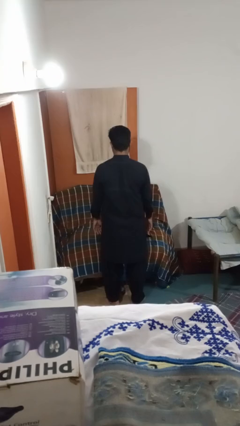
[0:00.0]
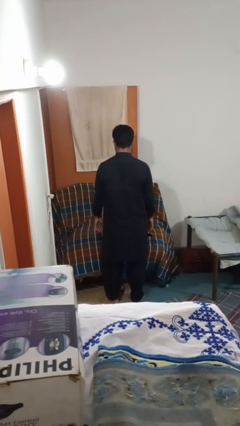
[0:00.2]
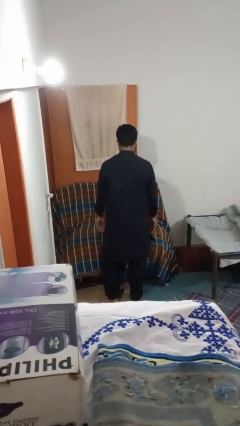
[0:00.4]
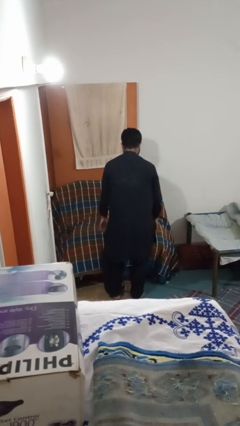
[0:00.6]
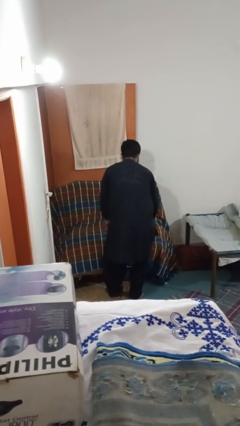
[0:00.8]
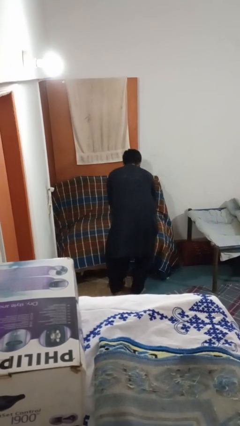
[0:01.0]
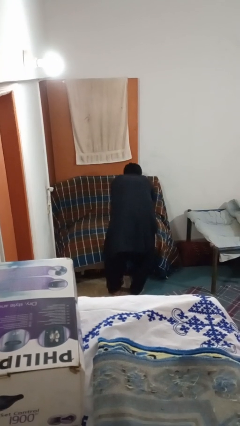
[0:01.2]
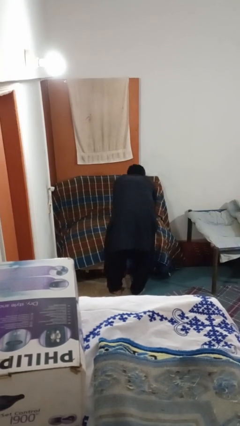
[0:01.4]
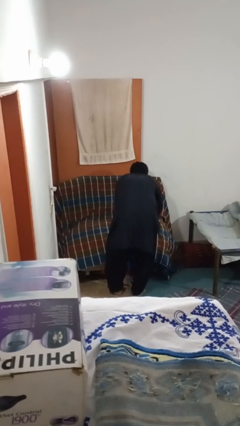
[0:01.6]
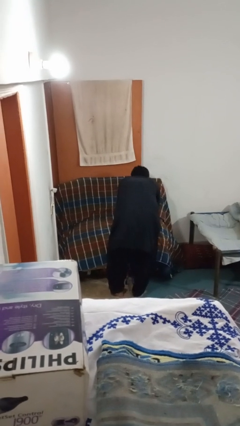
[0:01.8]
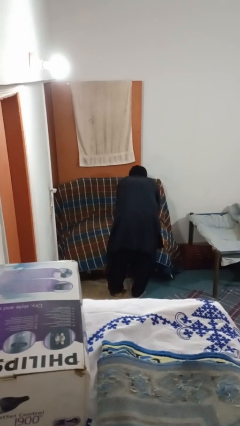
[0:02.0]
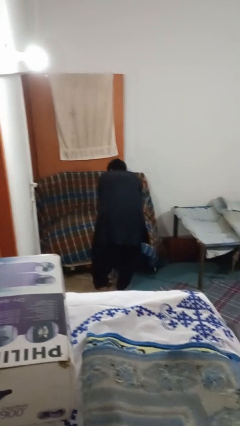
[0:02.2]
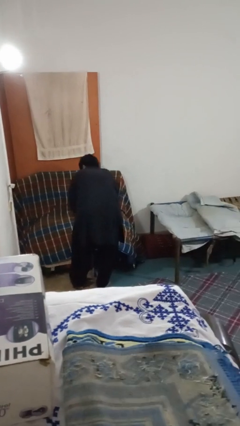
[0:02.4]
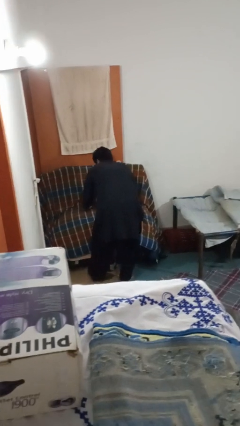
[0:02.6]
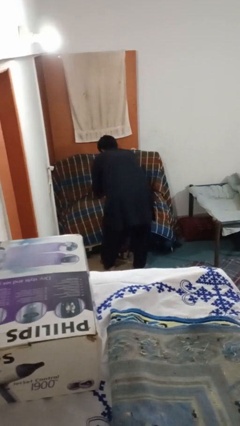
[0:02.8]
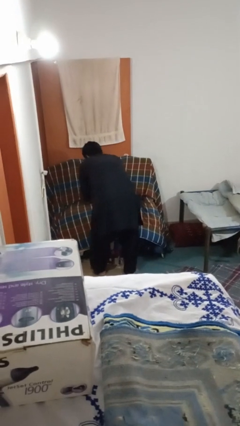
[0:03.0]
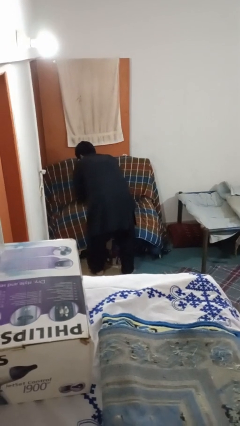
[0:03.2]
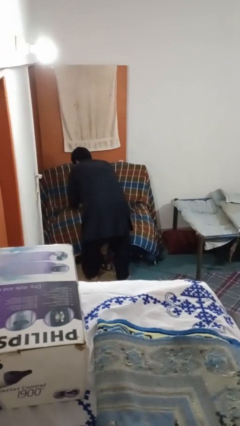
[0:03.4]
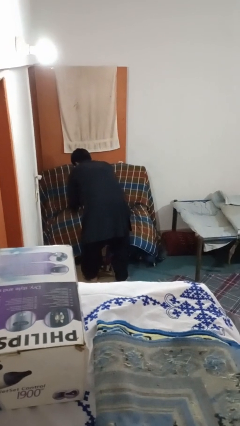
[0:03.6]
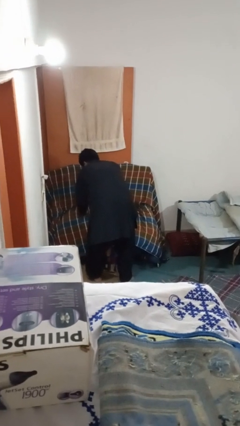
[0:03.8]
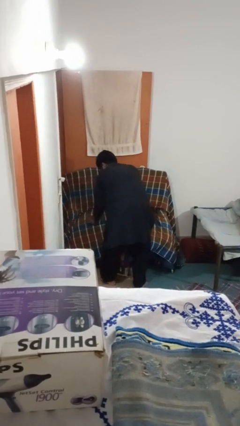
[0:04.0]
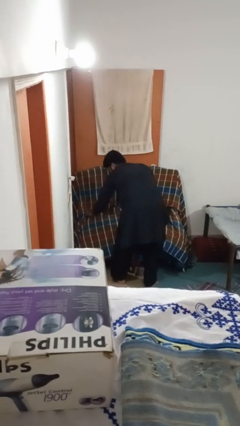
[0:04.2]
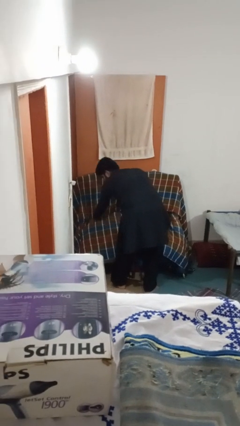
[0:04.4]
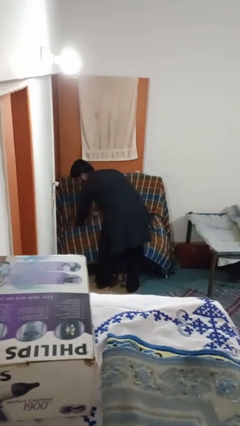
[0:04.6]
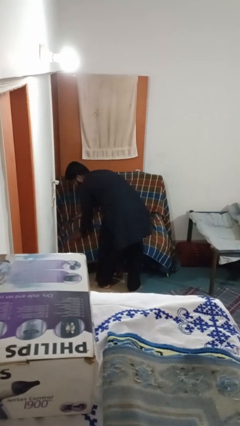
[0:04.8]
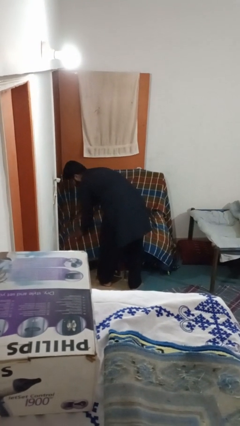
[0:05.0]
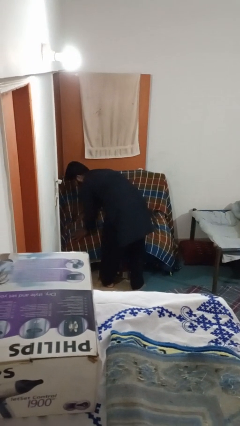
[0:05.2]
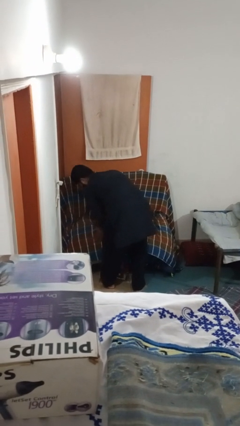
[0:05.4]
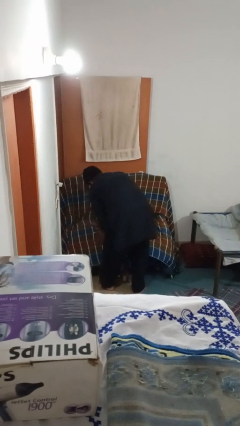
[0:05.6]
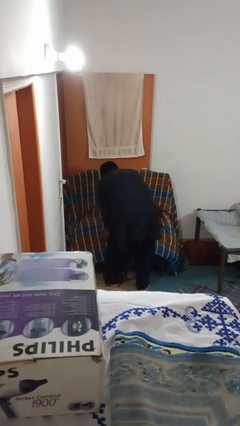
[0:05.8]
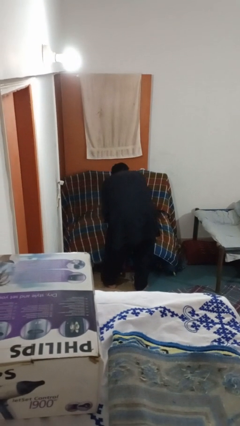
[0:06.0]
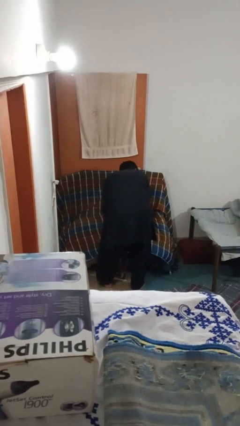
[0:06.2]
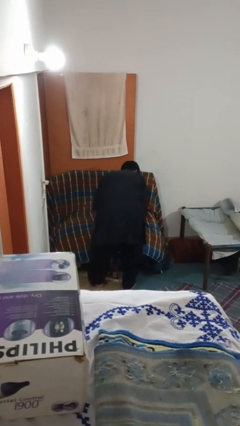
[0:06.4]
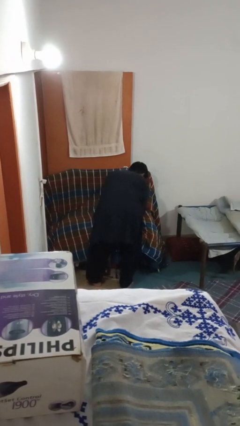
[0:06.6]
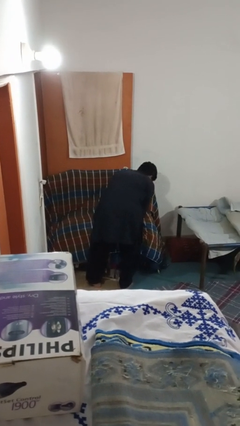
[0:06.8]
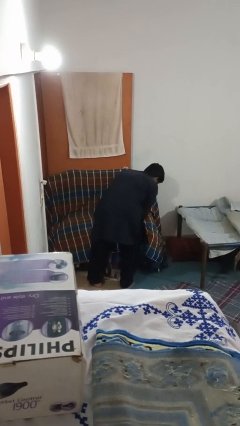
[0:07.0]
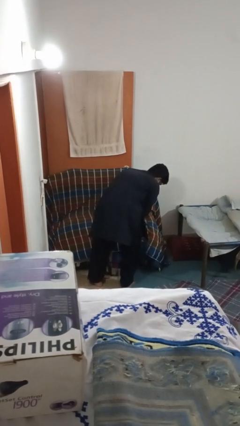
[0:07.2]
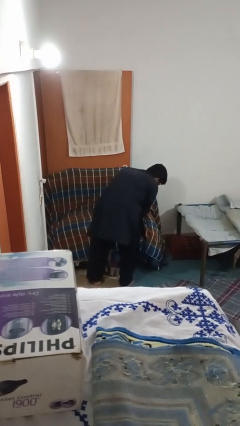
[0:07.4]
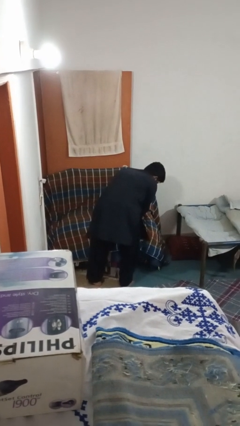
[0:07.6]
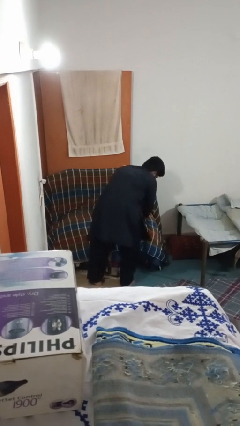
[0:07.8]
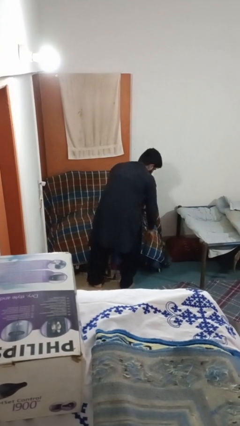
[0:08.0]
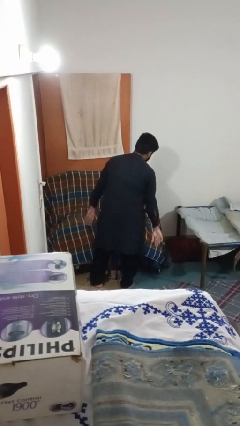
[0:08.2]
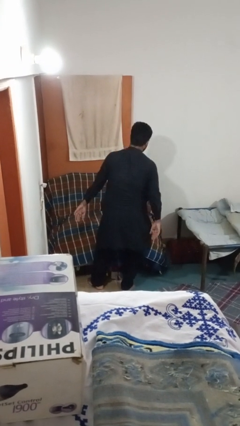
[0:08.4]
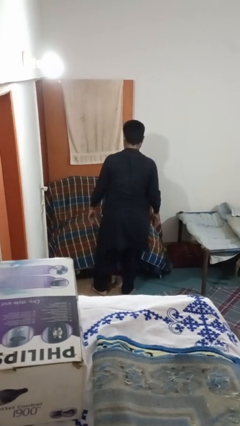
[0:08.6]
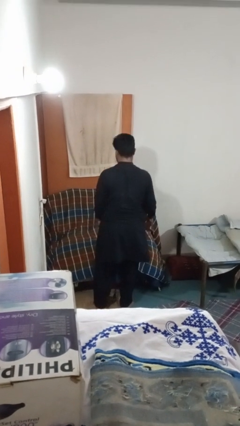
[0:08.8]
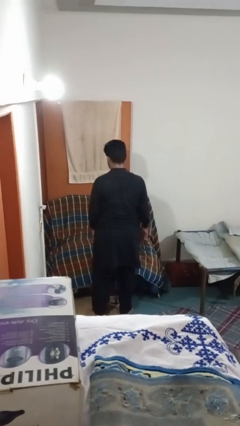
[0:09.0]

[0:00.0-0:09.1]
person searches in couch

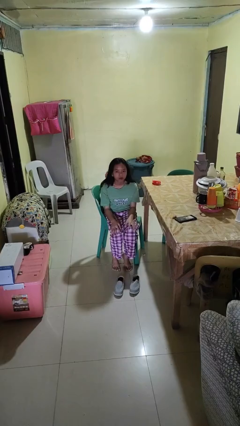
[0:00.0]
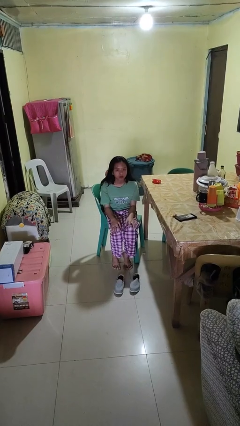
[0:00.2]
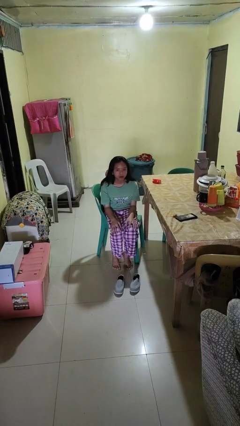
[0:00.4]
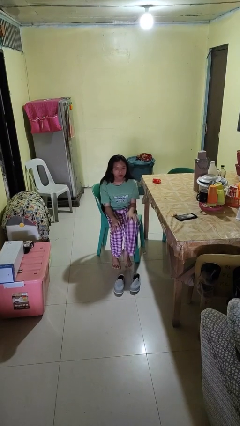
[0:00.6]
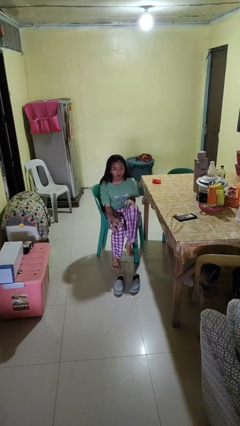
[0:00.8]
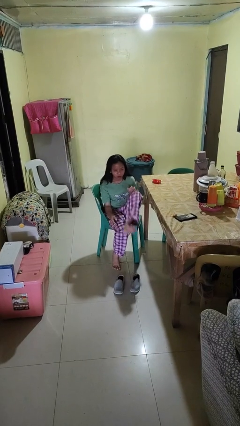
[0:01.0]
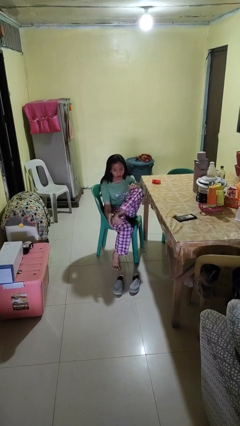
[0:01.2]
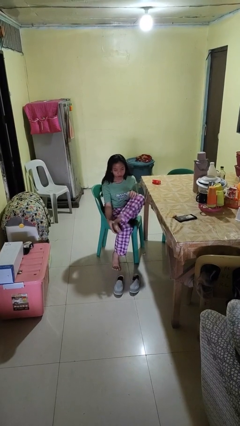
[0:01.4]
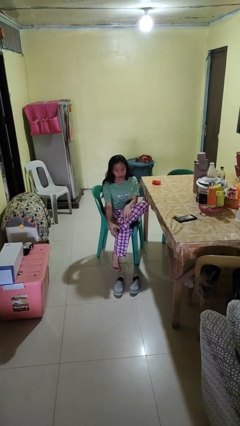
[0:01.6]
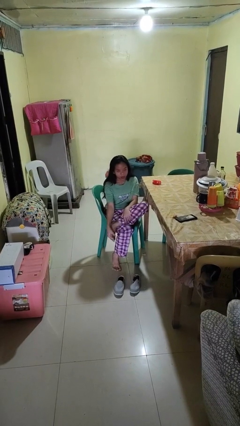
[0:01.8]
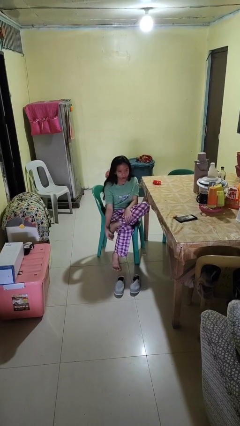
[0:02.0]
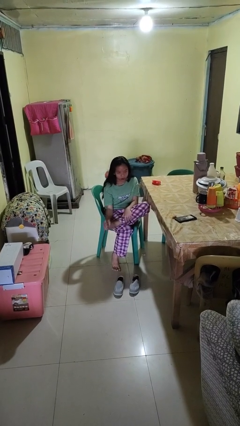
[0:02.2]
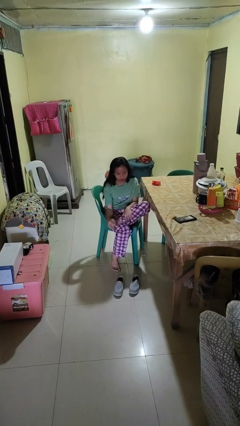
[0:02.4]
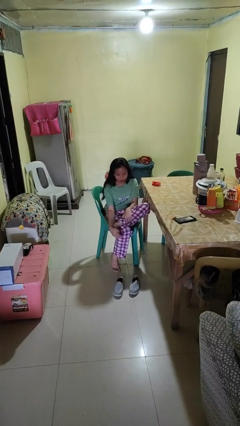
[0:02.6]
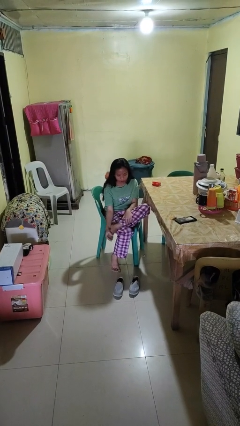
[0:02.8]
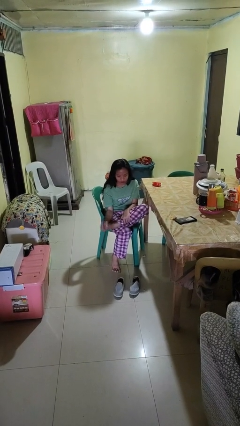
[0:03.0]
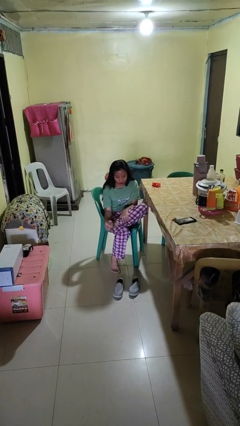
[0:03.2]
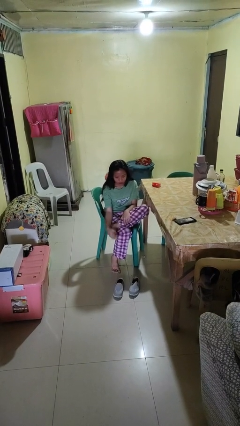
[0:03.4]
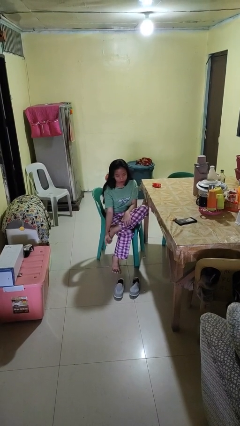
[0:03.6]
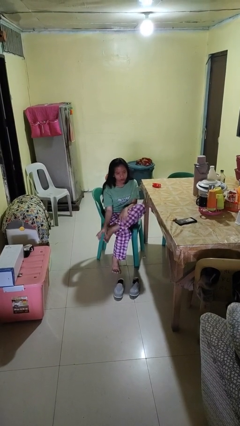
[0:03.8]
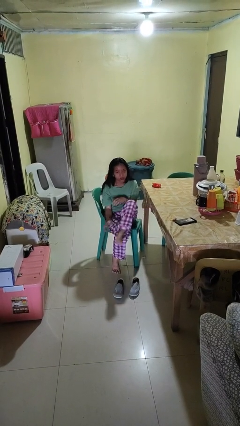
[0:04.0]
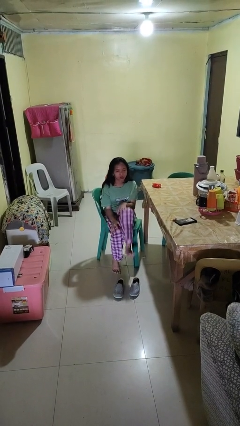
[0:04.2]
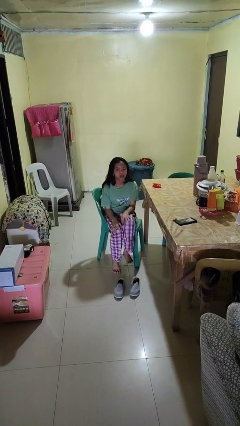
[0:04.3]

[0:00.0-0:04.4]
person rubs foot

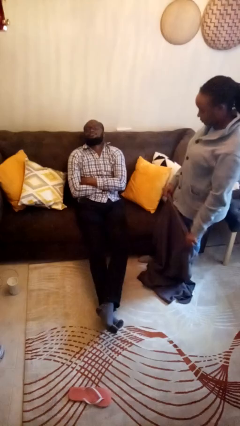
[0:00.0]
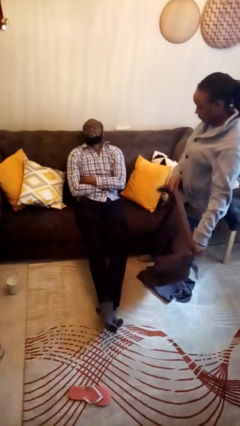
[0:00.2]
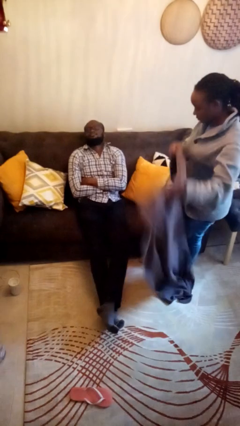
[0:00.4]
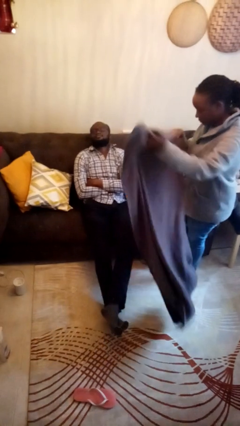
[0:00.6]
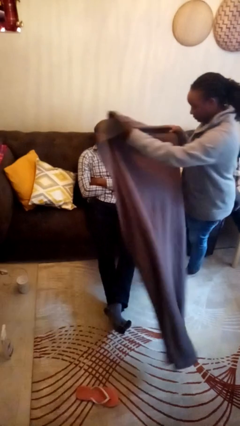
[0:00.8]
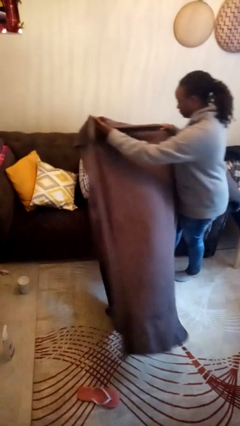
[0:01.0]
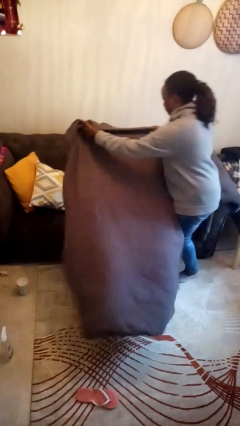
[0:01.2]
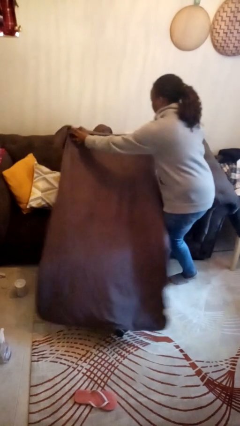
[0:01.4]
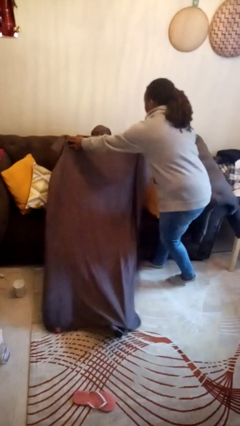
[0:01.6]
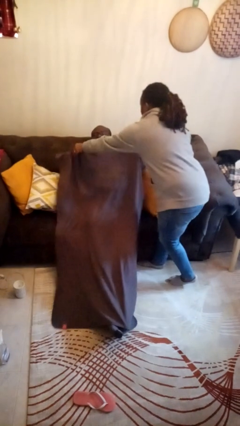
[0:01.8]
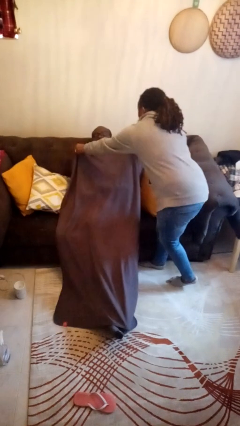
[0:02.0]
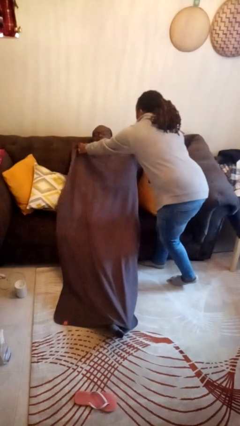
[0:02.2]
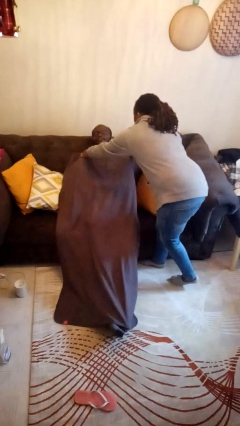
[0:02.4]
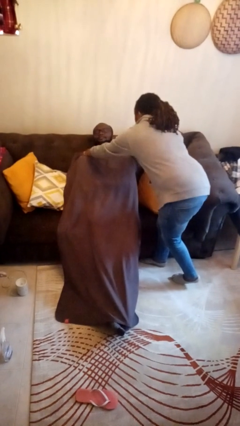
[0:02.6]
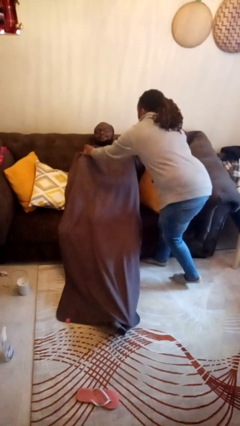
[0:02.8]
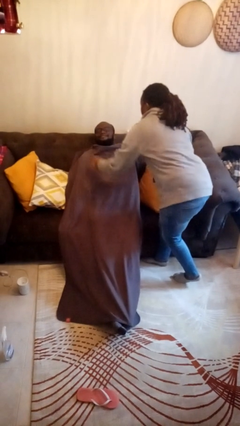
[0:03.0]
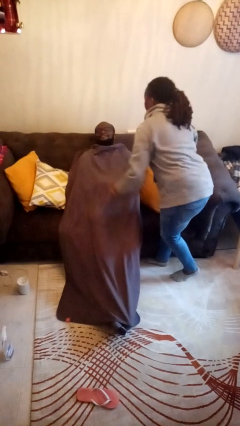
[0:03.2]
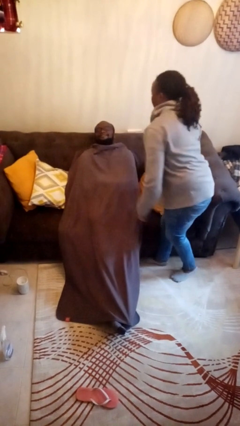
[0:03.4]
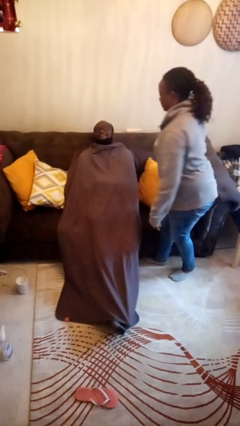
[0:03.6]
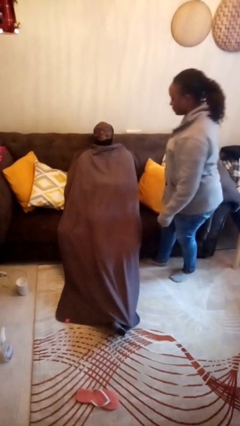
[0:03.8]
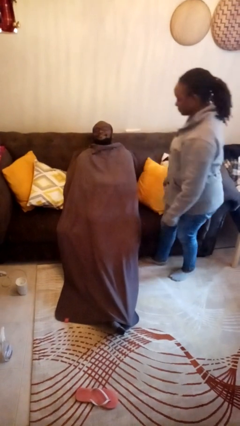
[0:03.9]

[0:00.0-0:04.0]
person covers friend with blanket

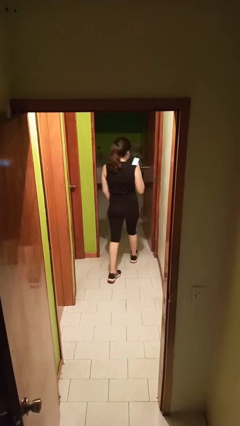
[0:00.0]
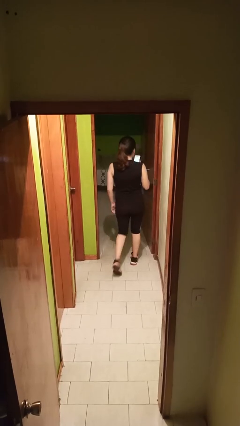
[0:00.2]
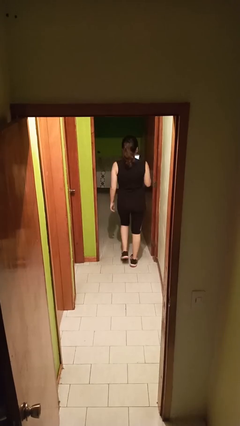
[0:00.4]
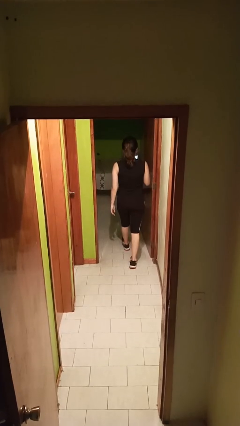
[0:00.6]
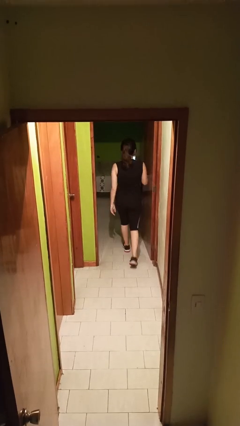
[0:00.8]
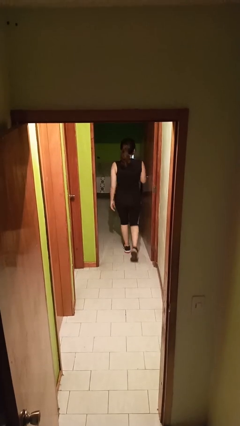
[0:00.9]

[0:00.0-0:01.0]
person exits scene through structure
